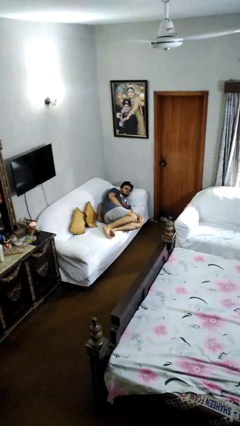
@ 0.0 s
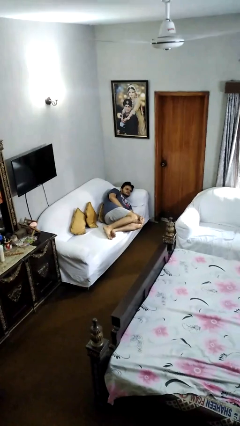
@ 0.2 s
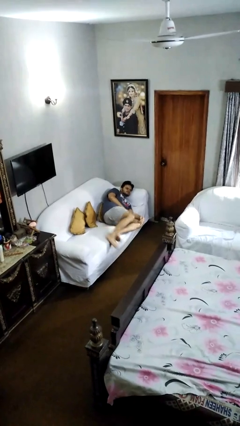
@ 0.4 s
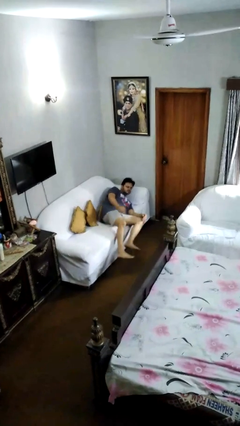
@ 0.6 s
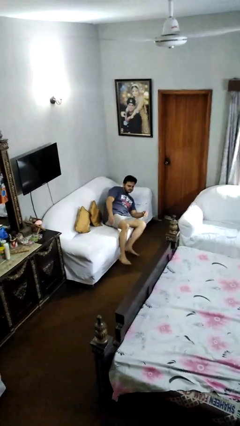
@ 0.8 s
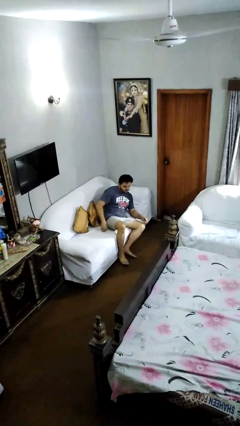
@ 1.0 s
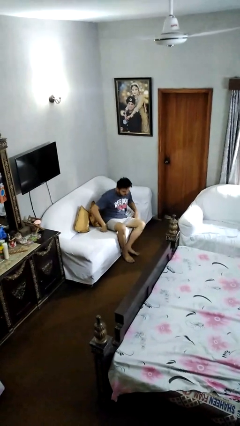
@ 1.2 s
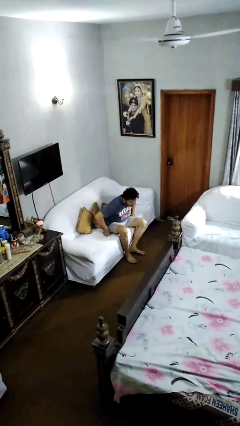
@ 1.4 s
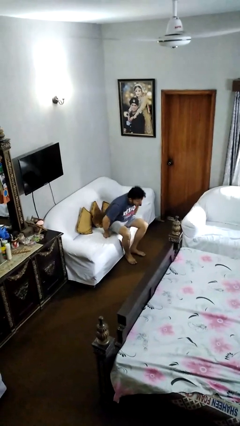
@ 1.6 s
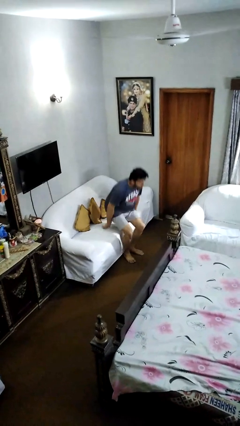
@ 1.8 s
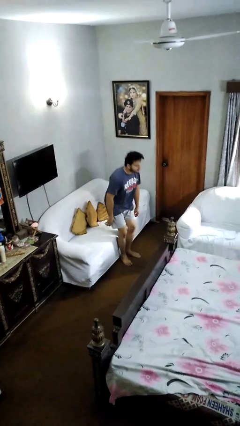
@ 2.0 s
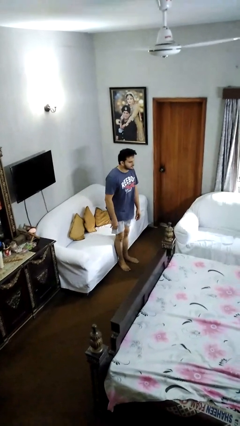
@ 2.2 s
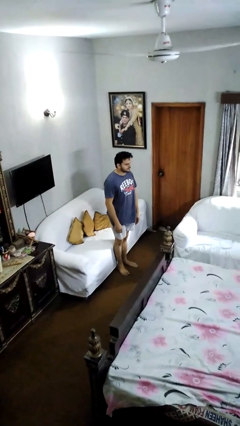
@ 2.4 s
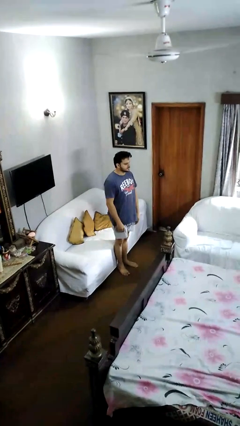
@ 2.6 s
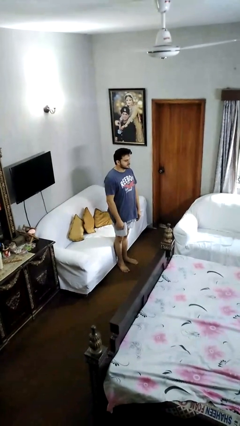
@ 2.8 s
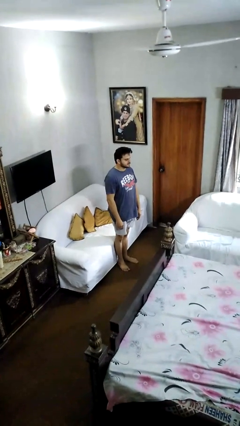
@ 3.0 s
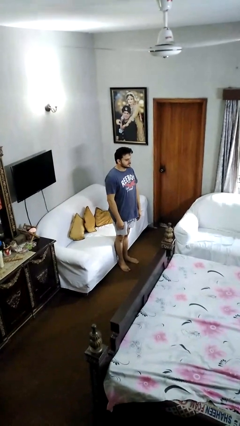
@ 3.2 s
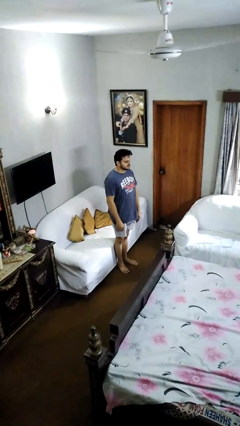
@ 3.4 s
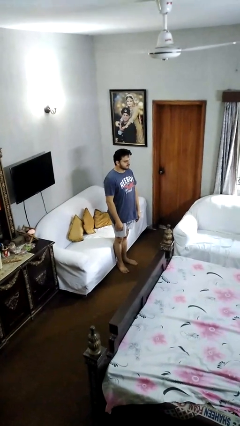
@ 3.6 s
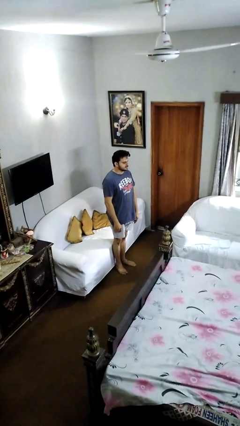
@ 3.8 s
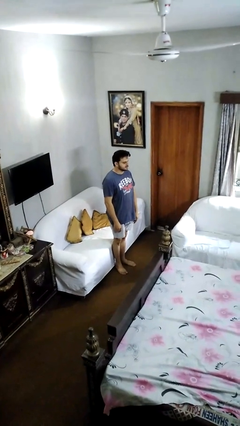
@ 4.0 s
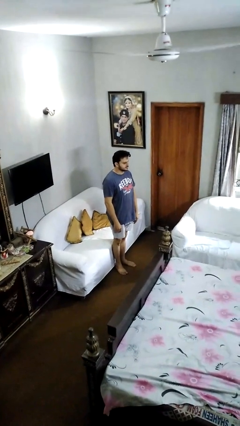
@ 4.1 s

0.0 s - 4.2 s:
person stands up

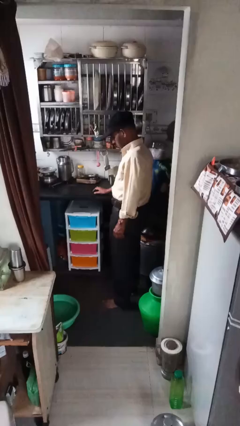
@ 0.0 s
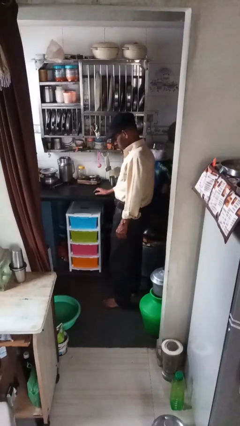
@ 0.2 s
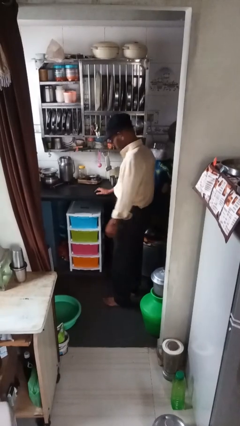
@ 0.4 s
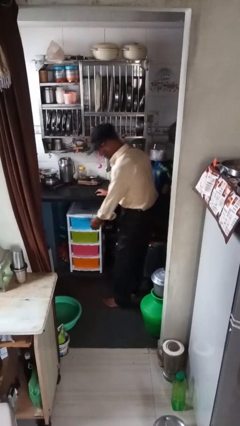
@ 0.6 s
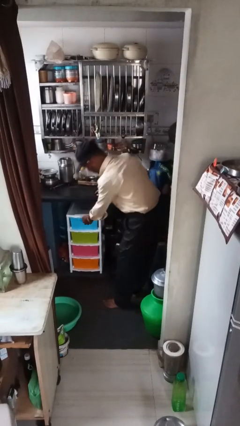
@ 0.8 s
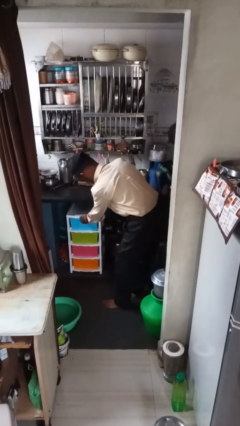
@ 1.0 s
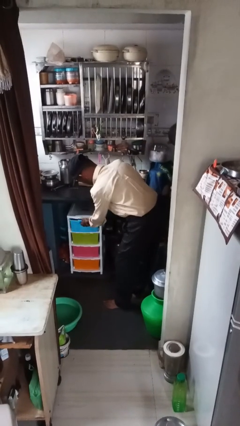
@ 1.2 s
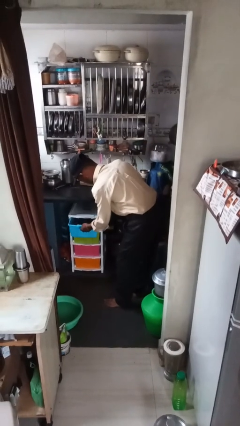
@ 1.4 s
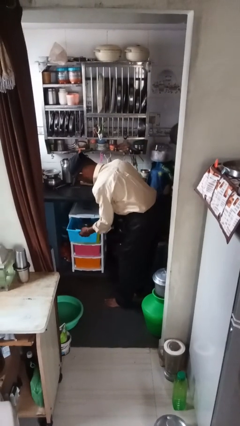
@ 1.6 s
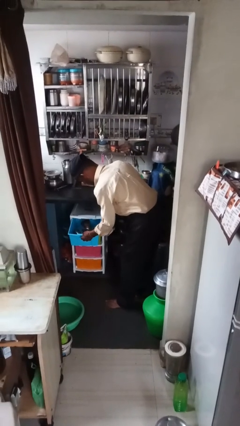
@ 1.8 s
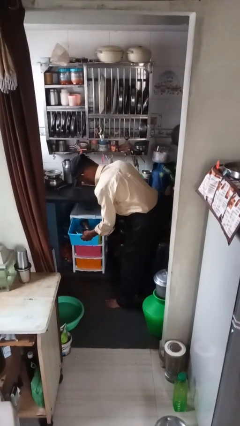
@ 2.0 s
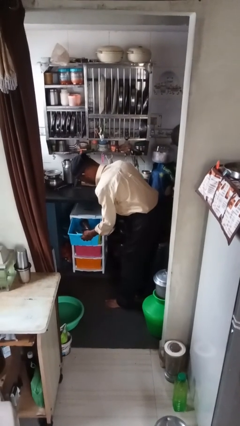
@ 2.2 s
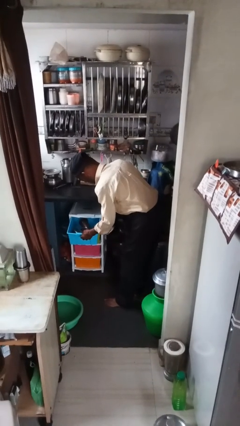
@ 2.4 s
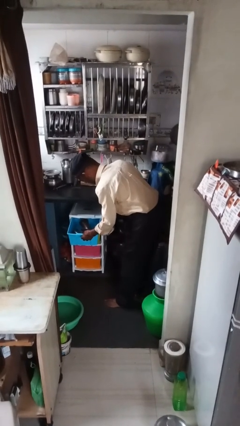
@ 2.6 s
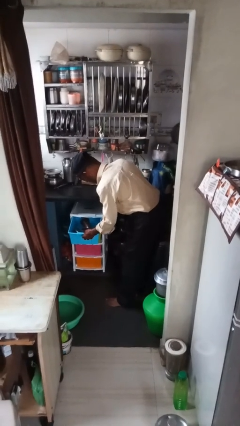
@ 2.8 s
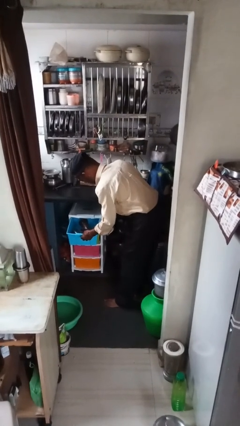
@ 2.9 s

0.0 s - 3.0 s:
person opens kitchen drawer

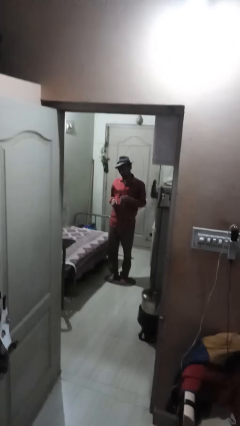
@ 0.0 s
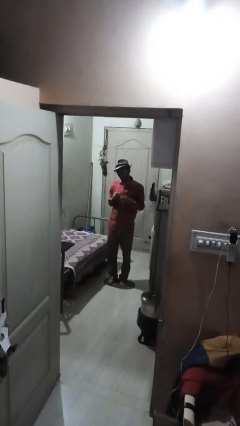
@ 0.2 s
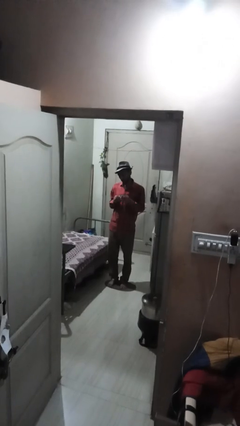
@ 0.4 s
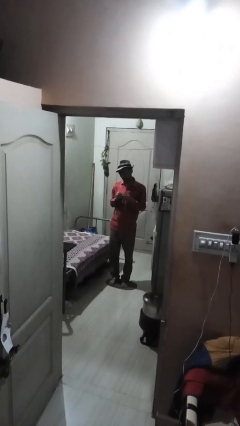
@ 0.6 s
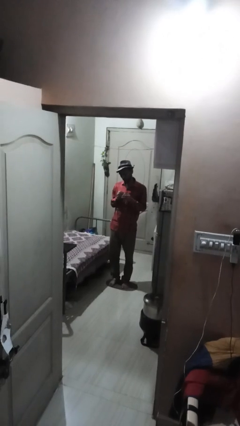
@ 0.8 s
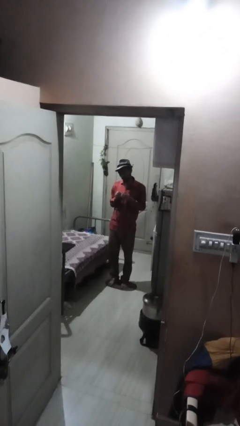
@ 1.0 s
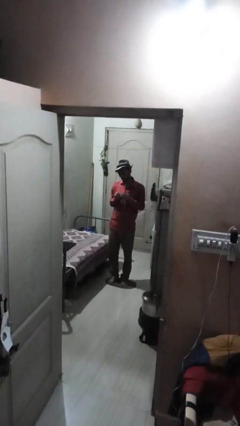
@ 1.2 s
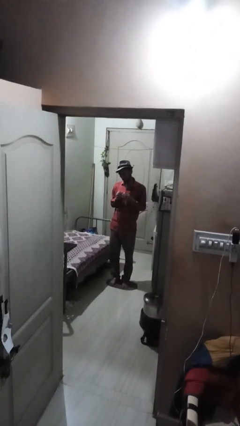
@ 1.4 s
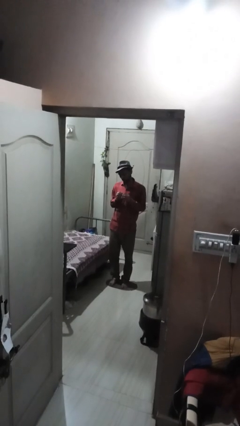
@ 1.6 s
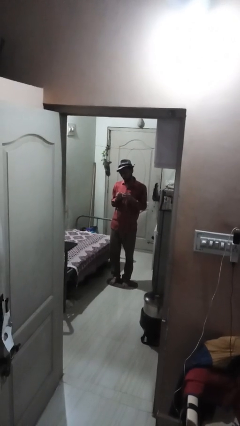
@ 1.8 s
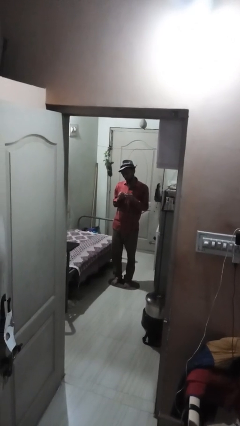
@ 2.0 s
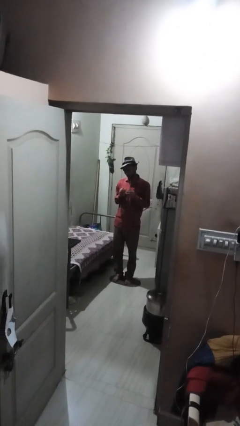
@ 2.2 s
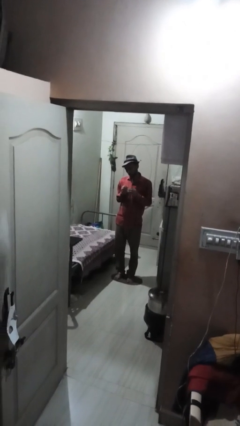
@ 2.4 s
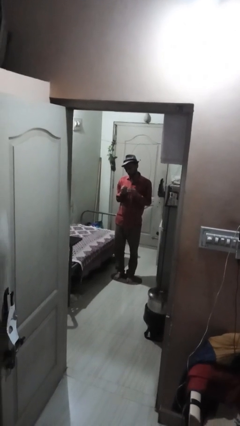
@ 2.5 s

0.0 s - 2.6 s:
person files fingernails

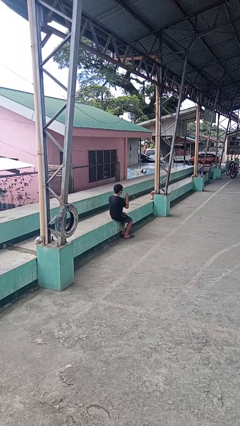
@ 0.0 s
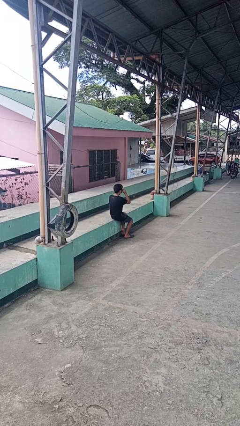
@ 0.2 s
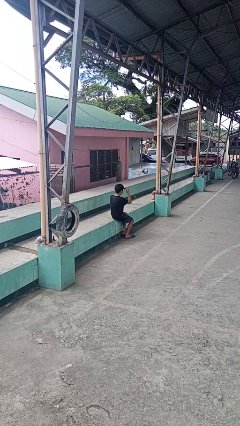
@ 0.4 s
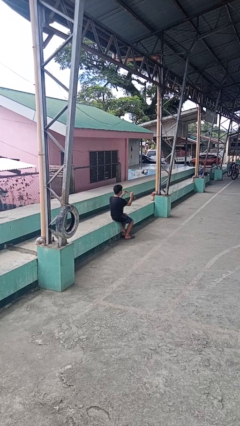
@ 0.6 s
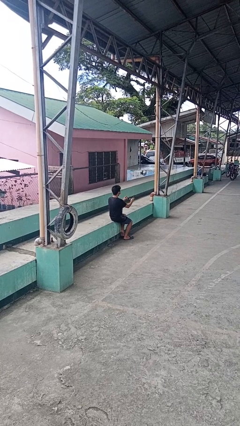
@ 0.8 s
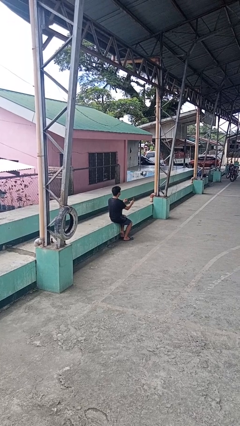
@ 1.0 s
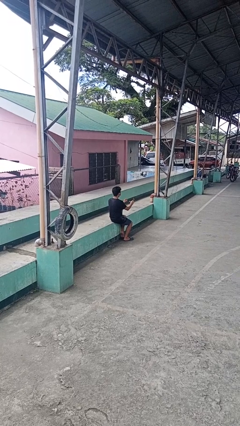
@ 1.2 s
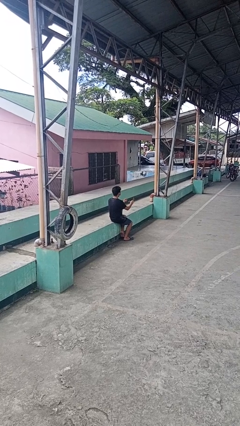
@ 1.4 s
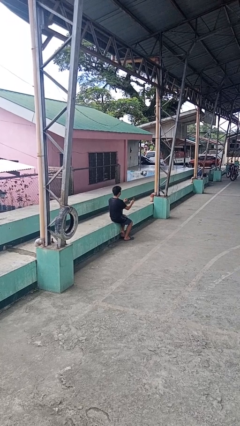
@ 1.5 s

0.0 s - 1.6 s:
person takes off sunglasses

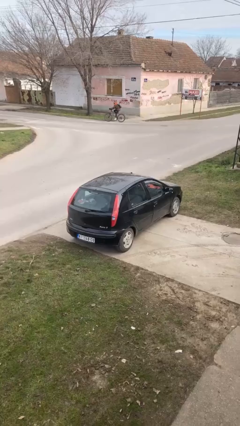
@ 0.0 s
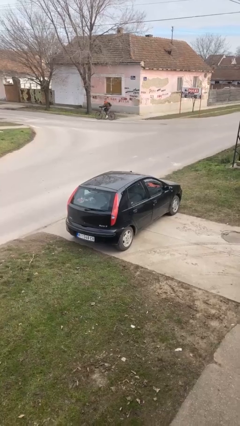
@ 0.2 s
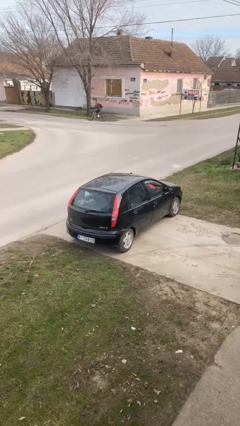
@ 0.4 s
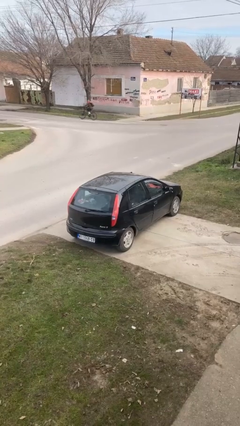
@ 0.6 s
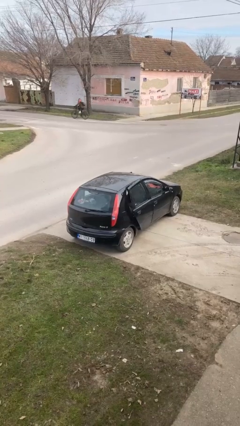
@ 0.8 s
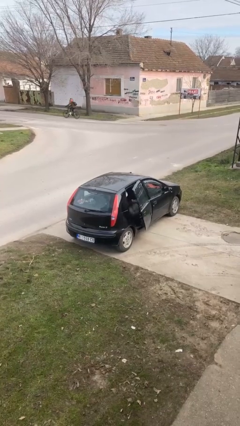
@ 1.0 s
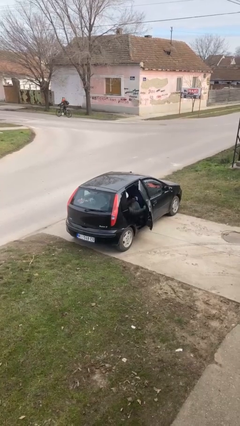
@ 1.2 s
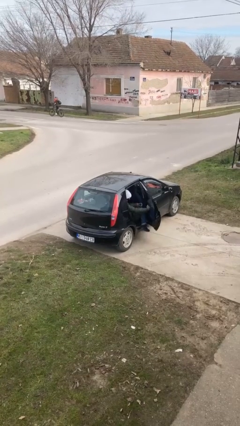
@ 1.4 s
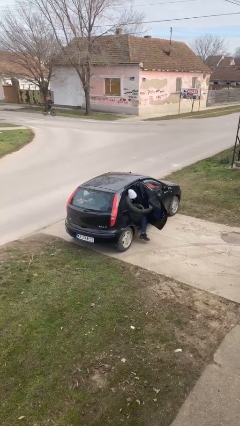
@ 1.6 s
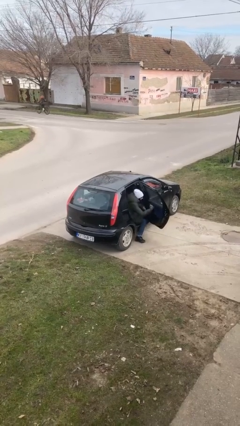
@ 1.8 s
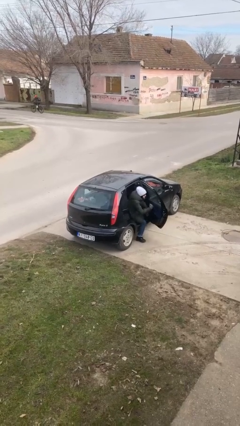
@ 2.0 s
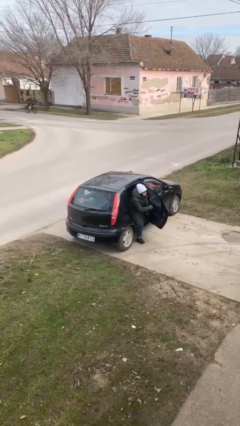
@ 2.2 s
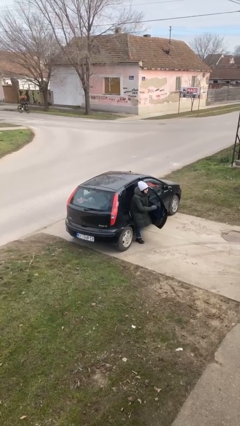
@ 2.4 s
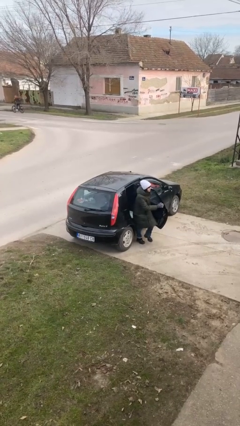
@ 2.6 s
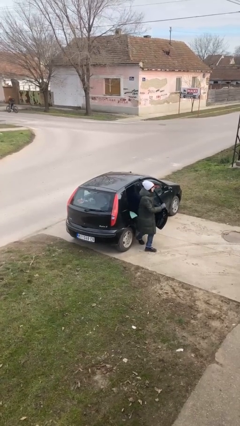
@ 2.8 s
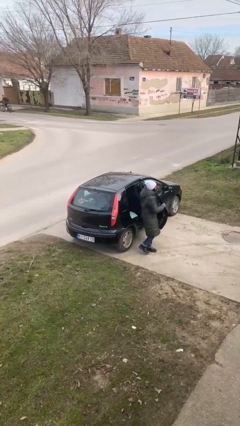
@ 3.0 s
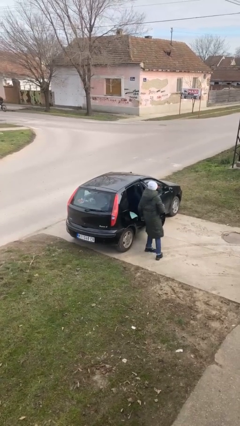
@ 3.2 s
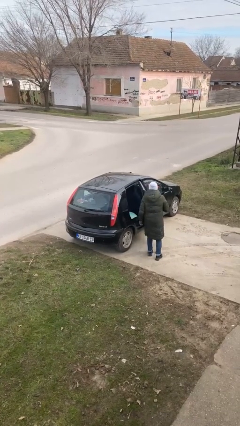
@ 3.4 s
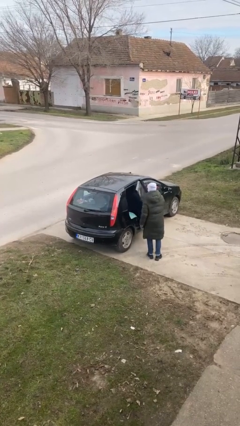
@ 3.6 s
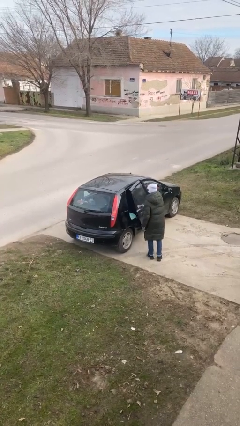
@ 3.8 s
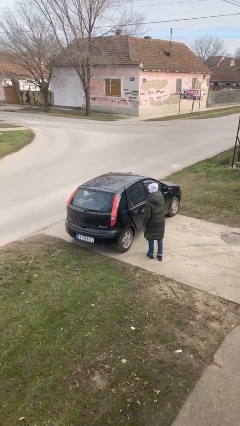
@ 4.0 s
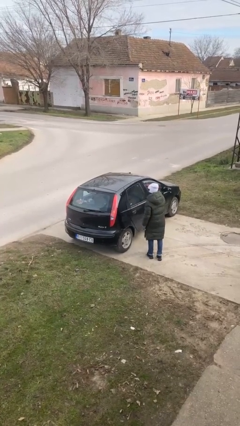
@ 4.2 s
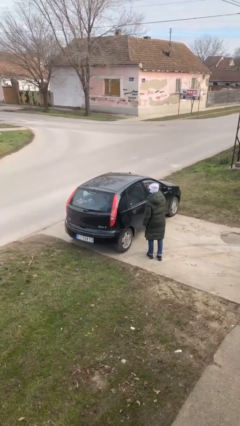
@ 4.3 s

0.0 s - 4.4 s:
car drops off person

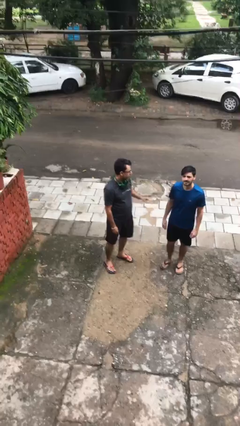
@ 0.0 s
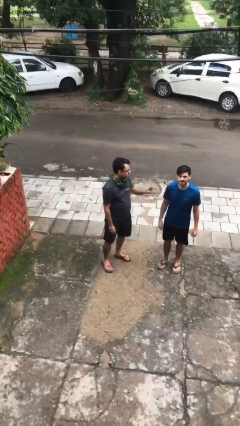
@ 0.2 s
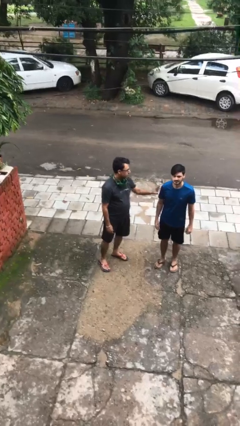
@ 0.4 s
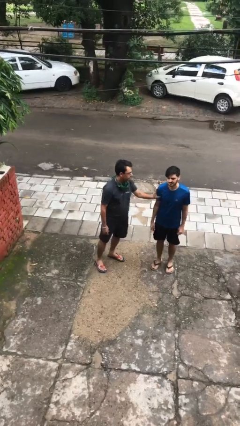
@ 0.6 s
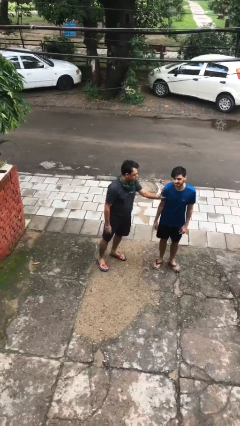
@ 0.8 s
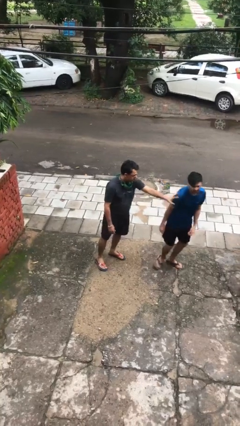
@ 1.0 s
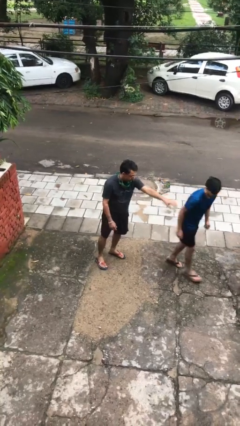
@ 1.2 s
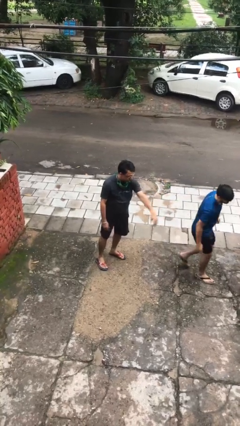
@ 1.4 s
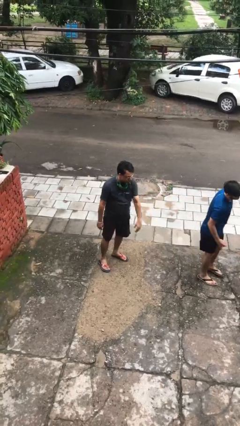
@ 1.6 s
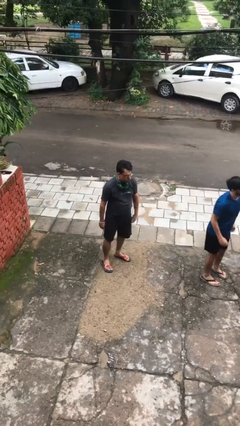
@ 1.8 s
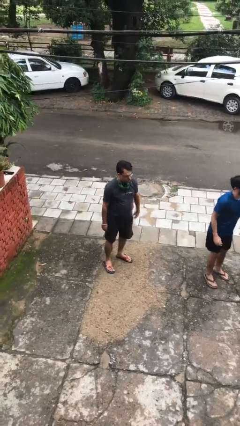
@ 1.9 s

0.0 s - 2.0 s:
person shoves person
